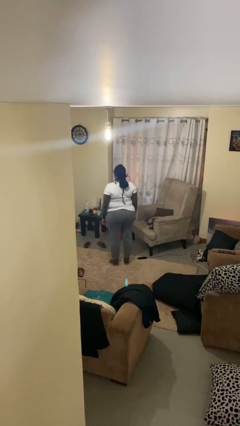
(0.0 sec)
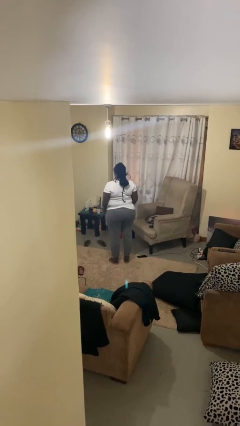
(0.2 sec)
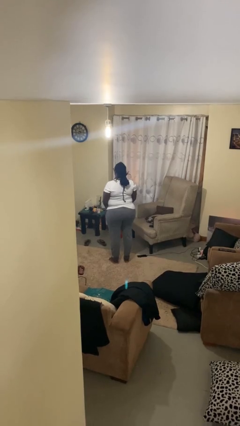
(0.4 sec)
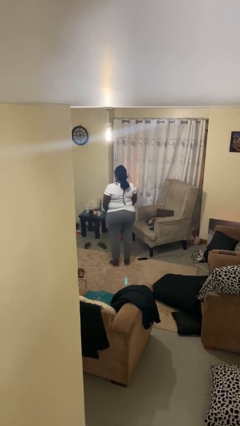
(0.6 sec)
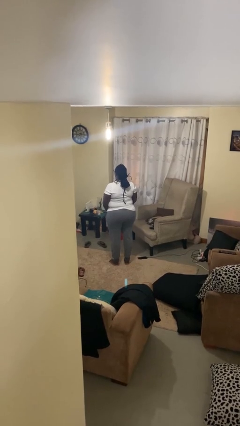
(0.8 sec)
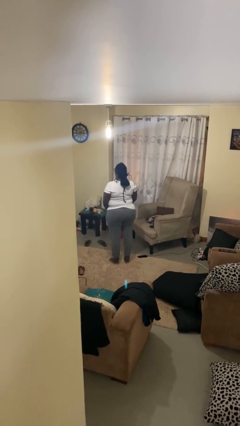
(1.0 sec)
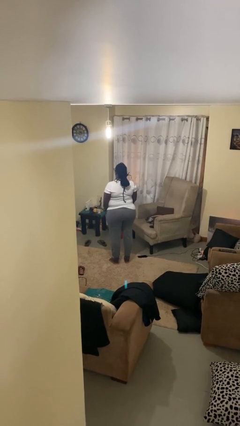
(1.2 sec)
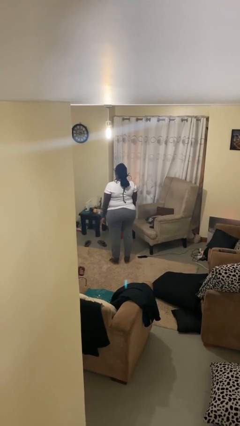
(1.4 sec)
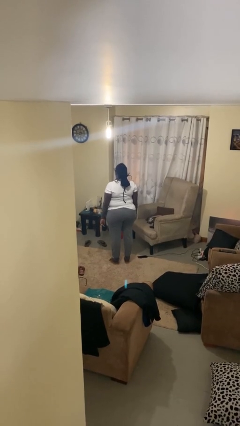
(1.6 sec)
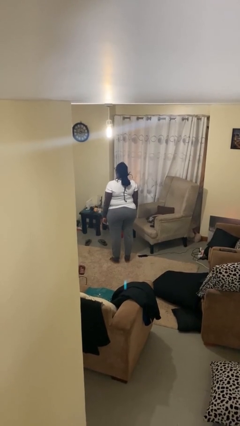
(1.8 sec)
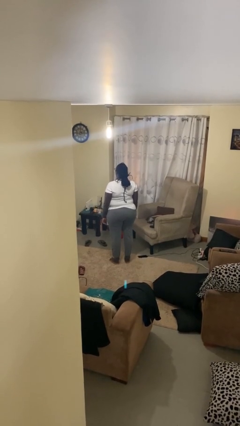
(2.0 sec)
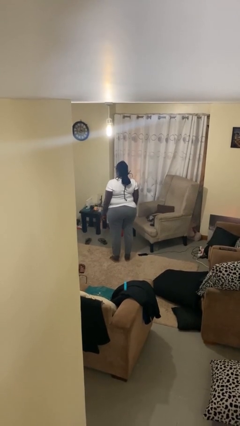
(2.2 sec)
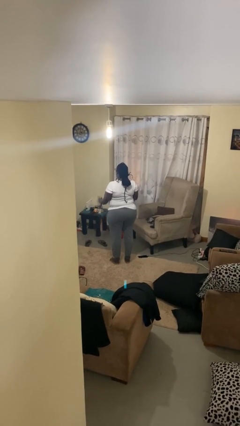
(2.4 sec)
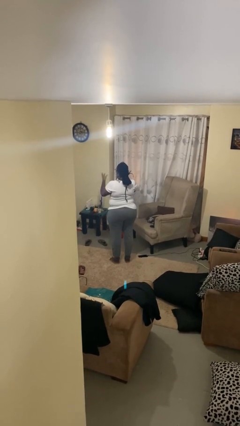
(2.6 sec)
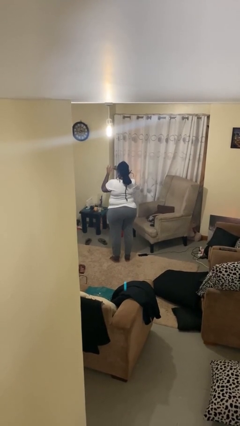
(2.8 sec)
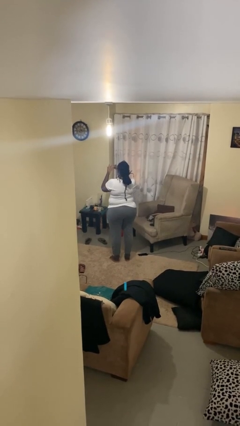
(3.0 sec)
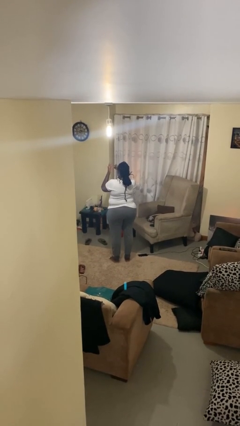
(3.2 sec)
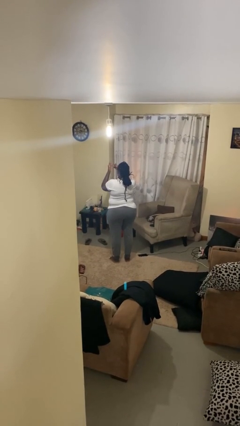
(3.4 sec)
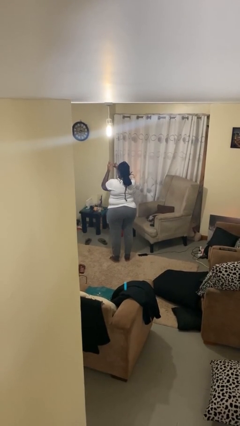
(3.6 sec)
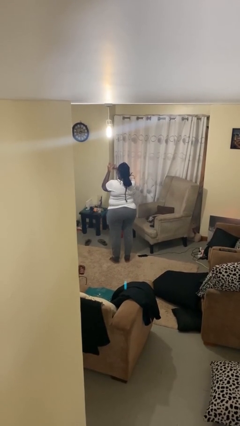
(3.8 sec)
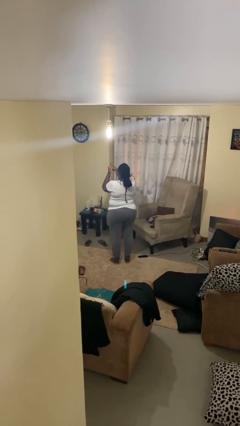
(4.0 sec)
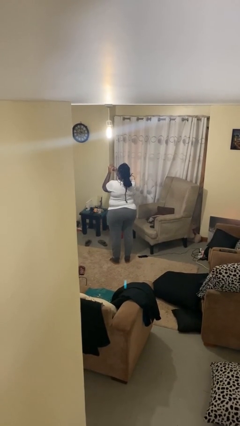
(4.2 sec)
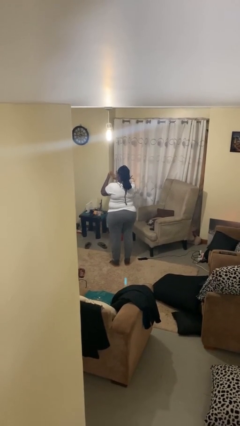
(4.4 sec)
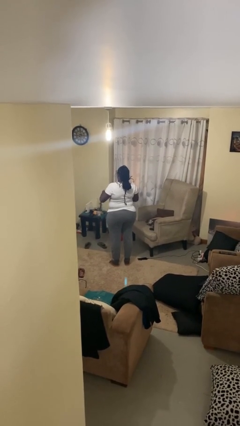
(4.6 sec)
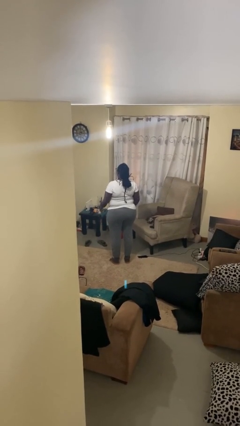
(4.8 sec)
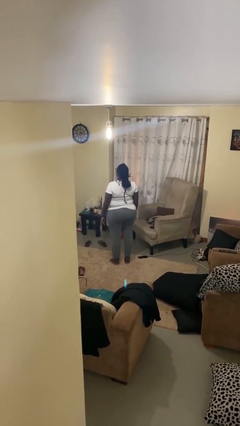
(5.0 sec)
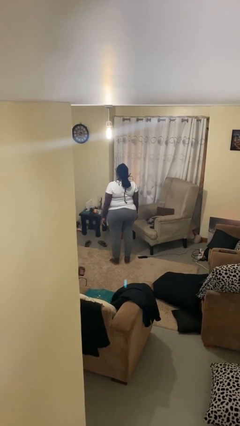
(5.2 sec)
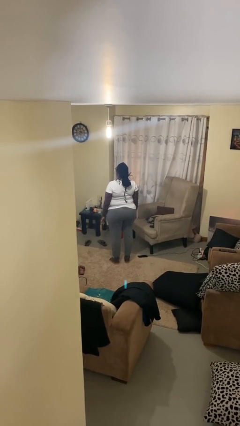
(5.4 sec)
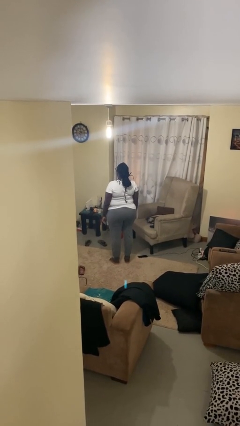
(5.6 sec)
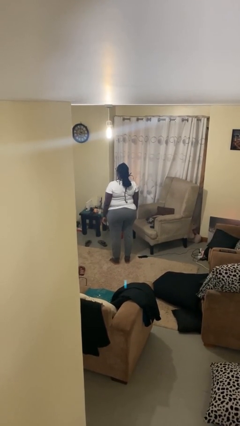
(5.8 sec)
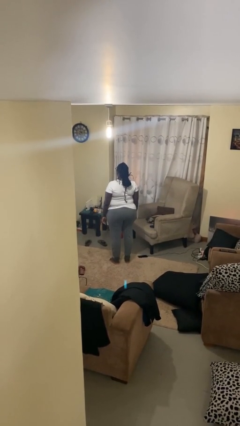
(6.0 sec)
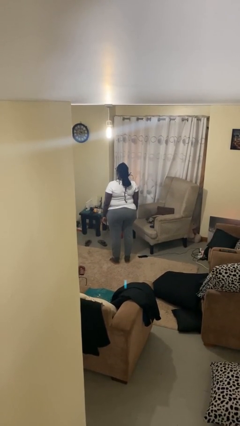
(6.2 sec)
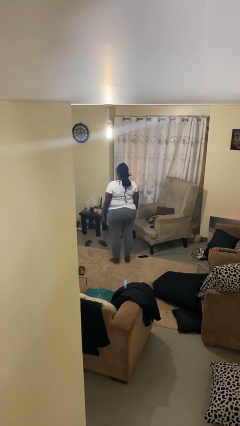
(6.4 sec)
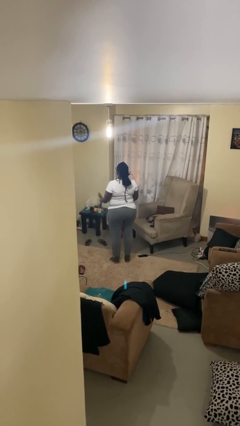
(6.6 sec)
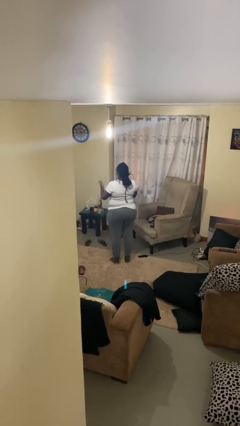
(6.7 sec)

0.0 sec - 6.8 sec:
person puts on ring

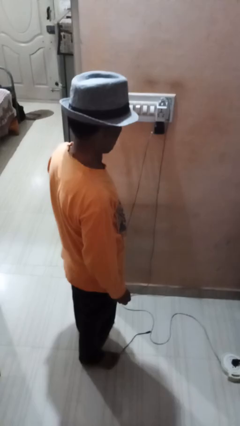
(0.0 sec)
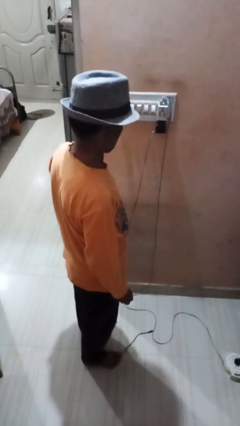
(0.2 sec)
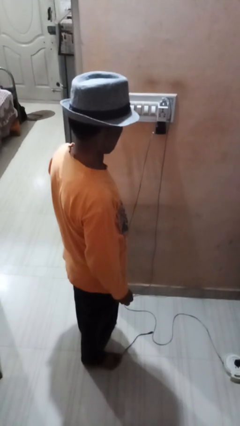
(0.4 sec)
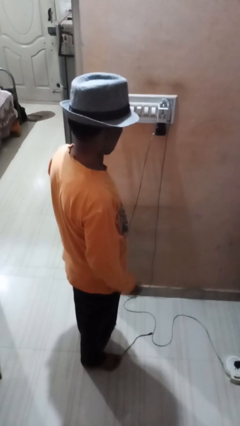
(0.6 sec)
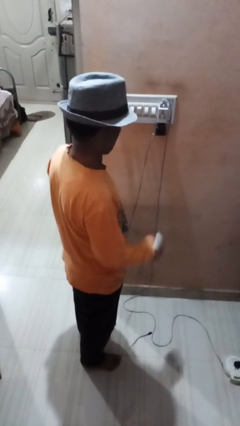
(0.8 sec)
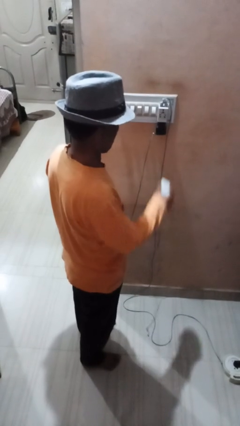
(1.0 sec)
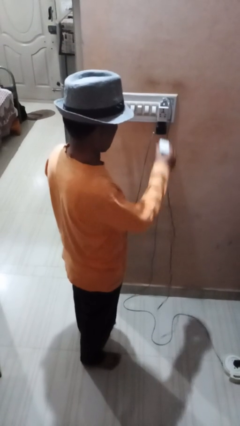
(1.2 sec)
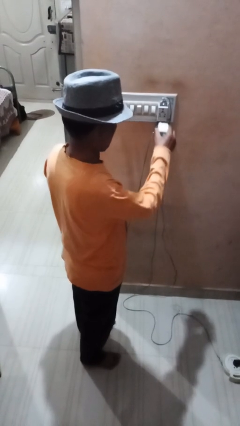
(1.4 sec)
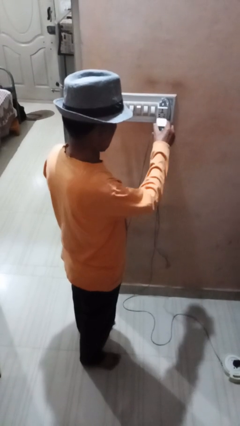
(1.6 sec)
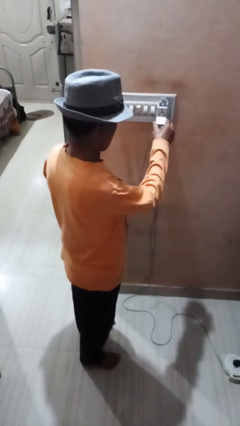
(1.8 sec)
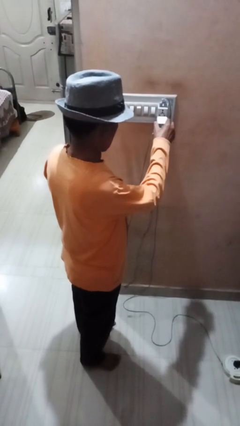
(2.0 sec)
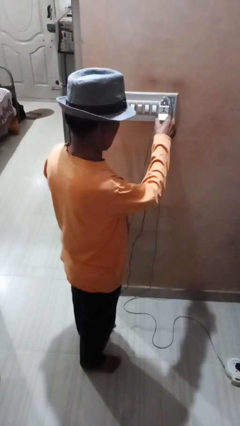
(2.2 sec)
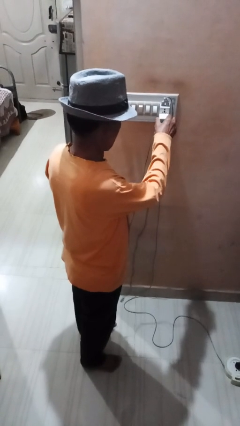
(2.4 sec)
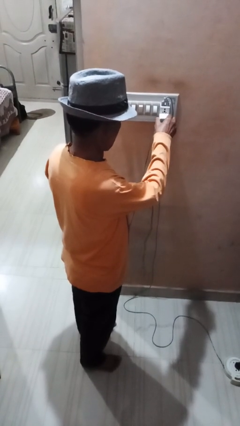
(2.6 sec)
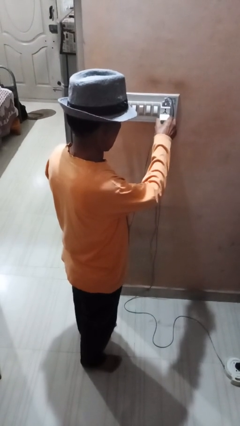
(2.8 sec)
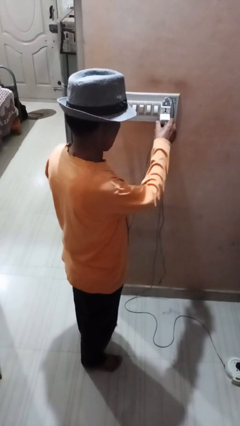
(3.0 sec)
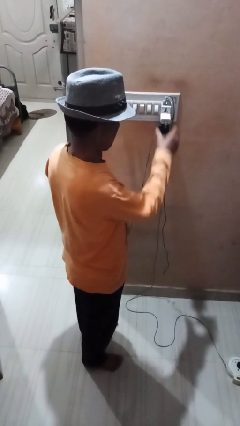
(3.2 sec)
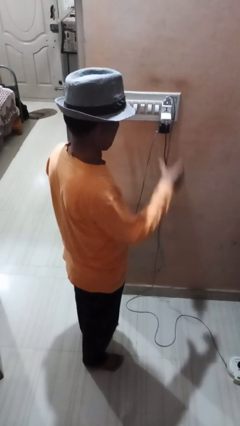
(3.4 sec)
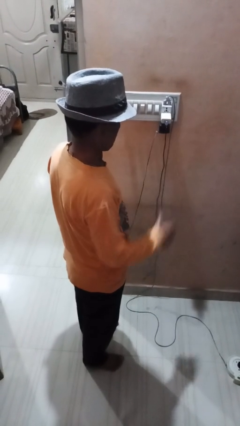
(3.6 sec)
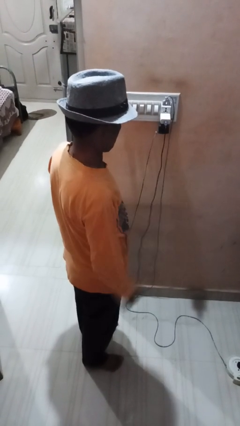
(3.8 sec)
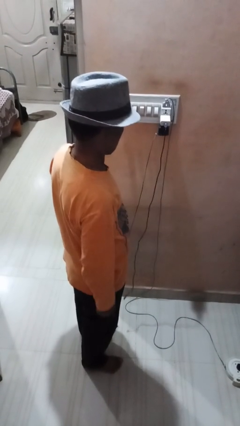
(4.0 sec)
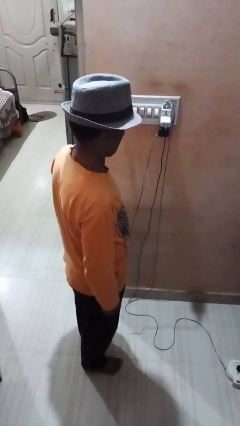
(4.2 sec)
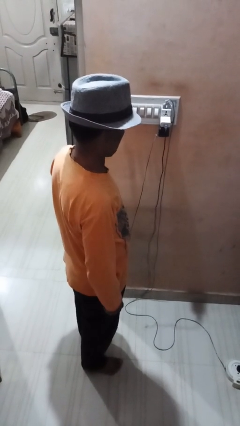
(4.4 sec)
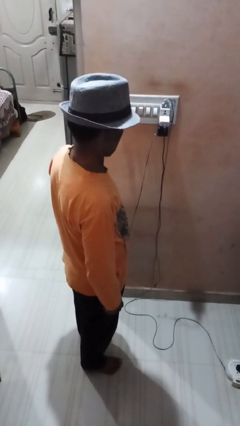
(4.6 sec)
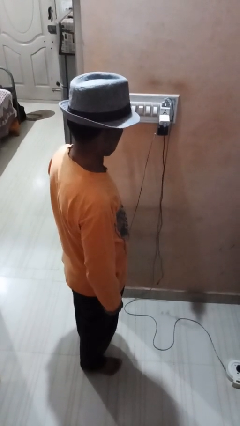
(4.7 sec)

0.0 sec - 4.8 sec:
person plugs into electrical socket

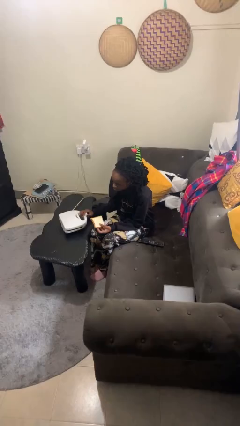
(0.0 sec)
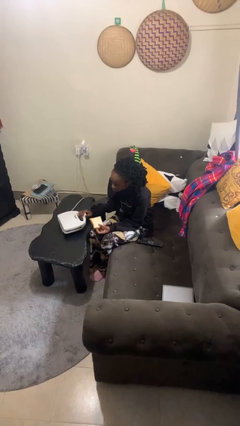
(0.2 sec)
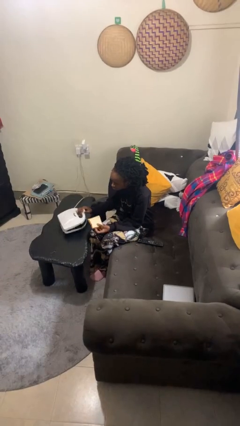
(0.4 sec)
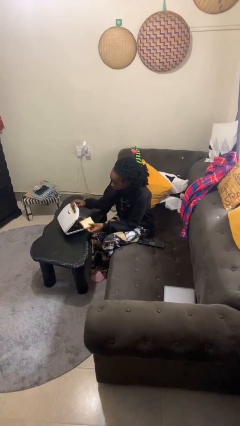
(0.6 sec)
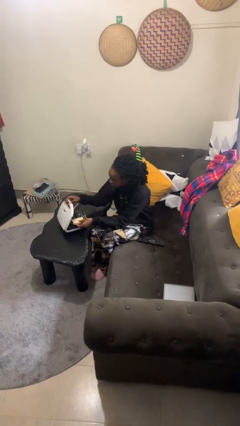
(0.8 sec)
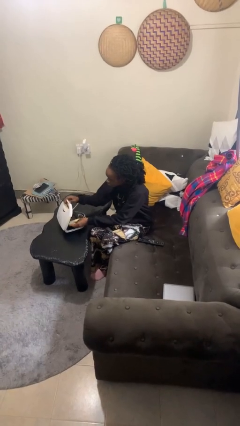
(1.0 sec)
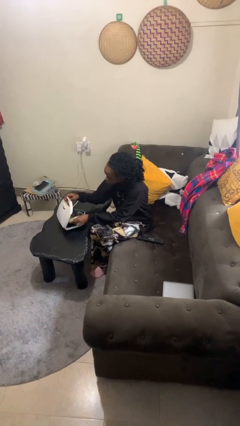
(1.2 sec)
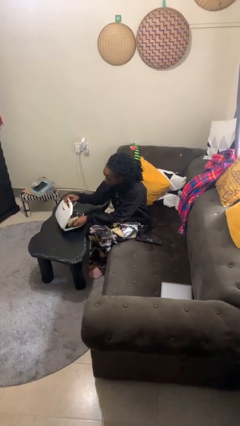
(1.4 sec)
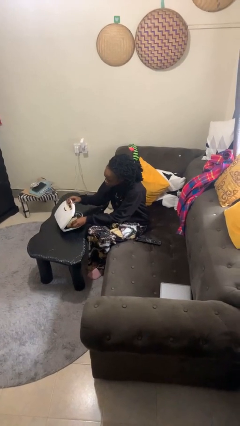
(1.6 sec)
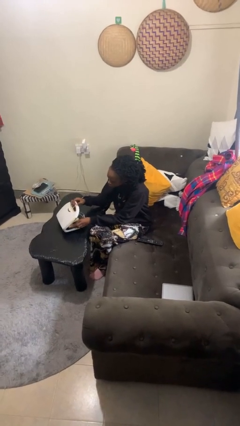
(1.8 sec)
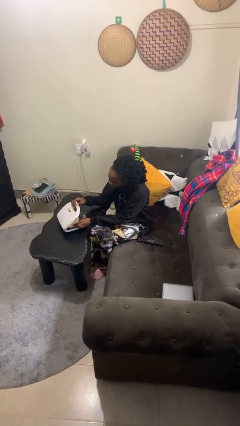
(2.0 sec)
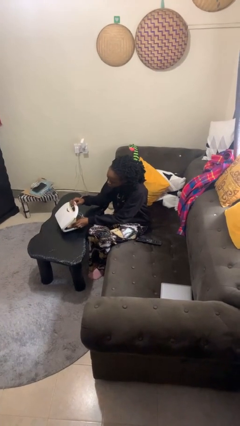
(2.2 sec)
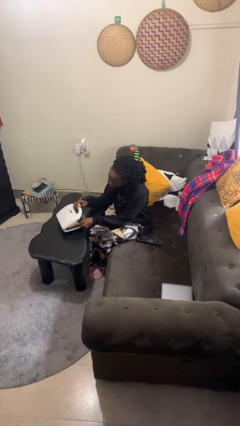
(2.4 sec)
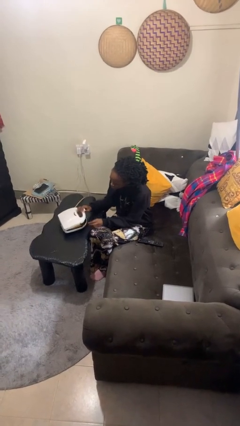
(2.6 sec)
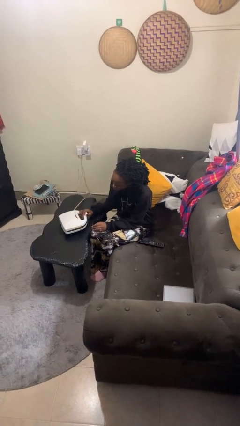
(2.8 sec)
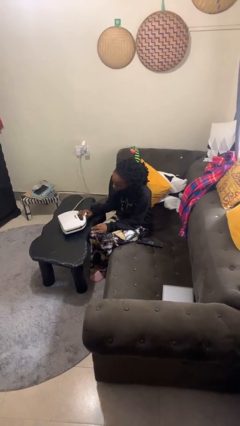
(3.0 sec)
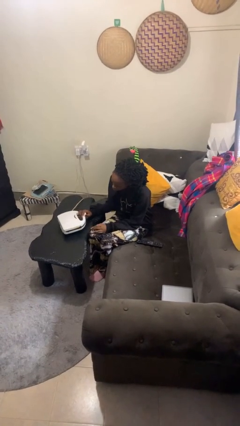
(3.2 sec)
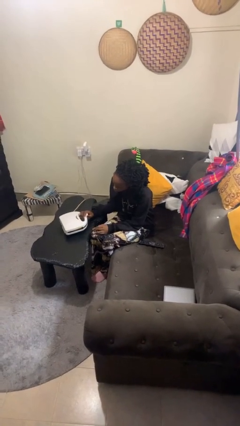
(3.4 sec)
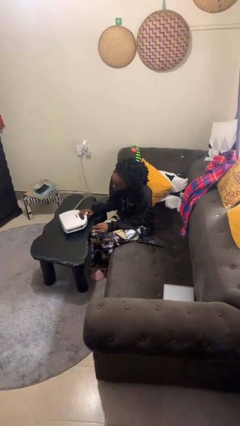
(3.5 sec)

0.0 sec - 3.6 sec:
person puts object into toaster

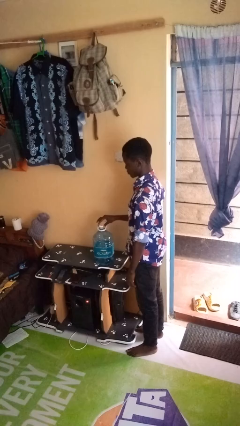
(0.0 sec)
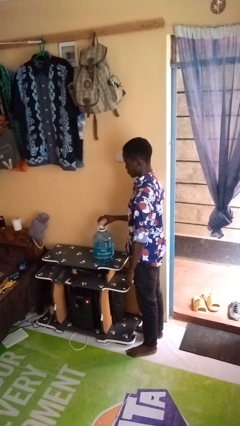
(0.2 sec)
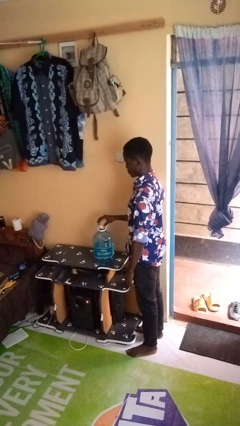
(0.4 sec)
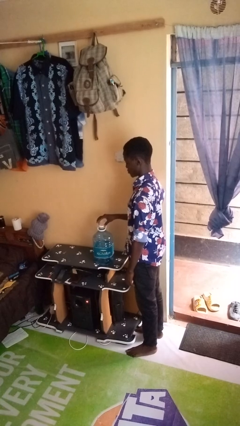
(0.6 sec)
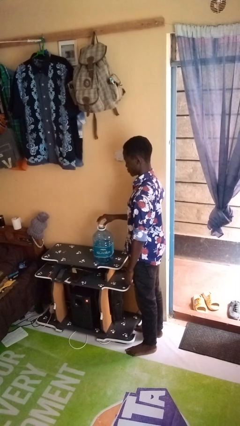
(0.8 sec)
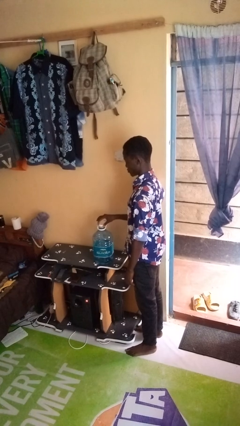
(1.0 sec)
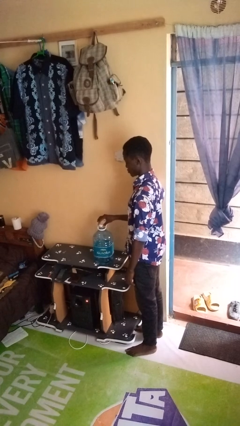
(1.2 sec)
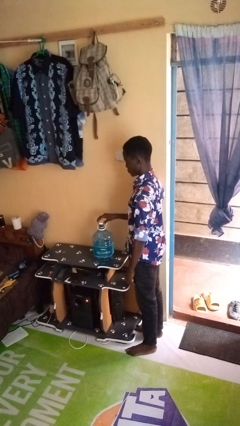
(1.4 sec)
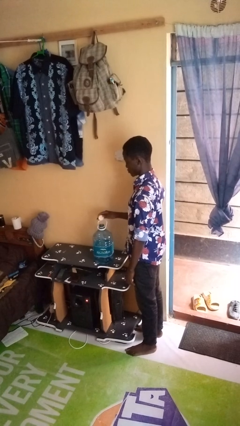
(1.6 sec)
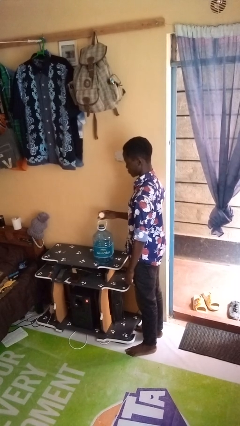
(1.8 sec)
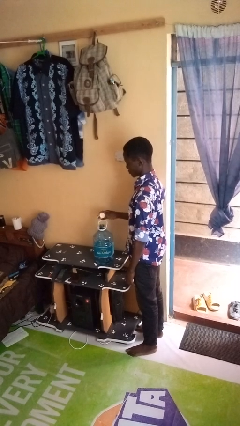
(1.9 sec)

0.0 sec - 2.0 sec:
person unscrews lid from bottle

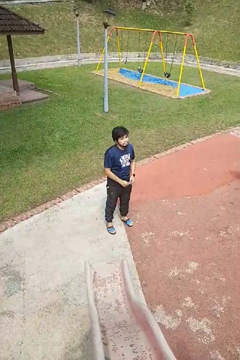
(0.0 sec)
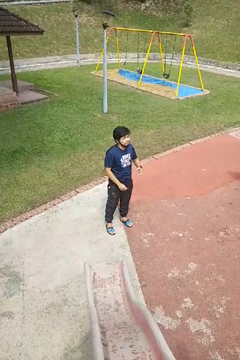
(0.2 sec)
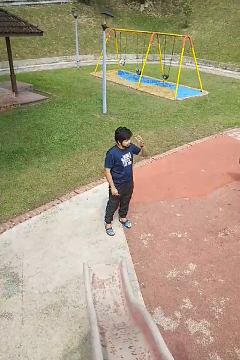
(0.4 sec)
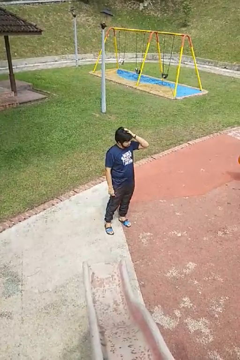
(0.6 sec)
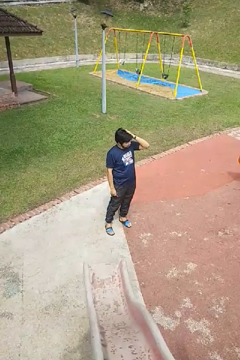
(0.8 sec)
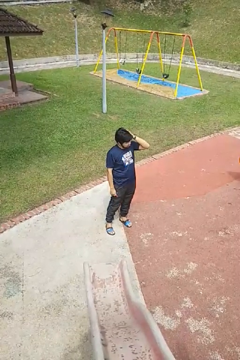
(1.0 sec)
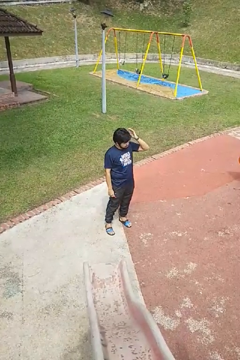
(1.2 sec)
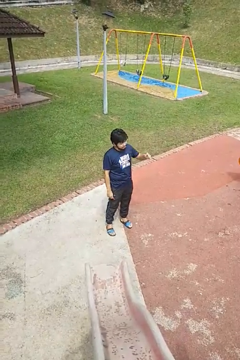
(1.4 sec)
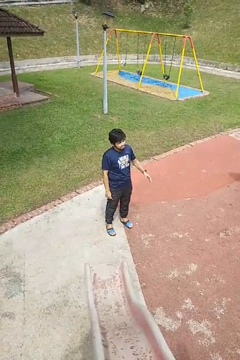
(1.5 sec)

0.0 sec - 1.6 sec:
person pats head
